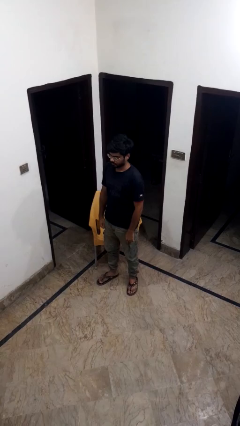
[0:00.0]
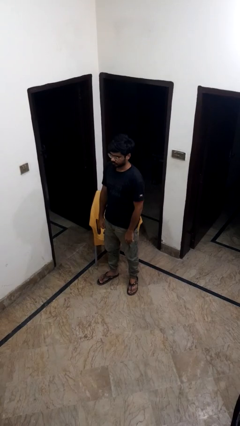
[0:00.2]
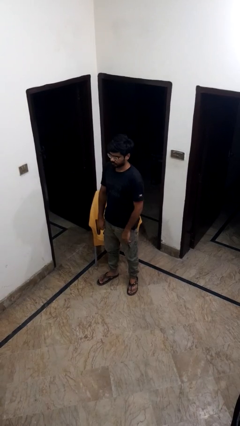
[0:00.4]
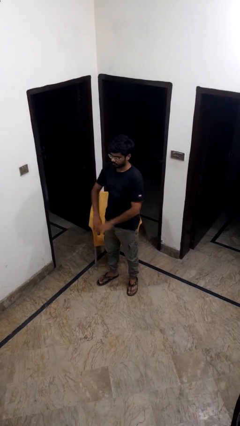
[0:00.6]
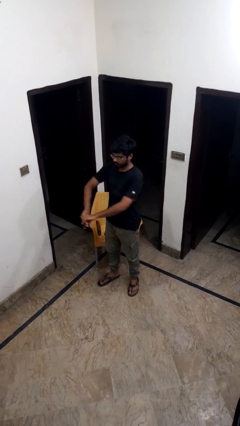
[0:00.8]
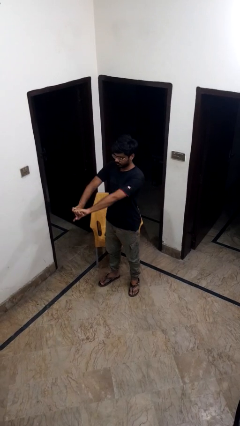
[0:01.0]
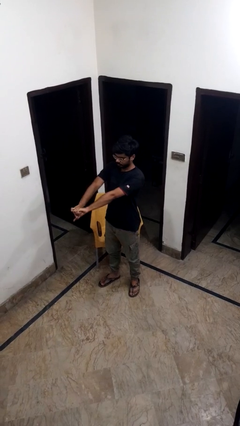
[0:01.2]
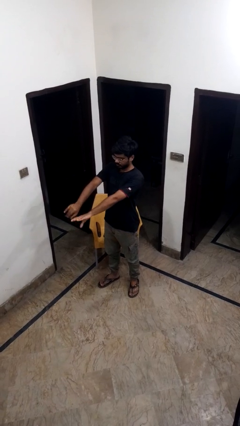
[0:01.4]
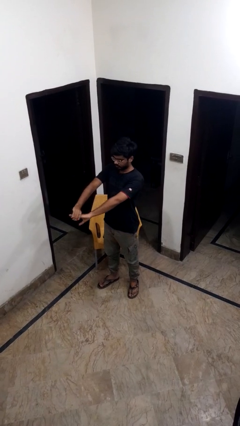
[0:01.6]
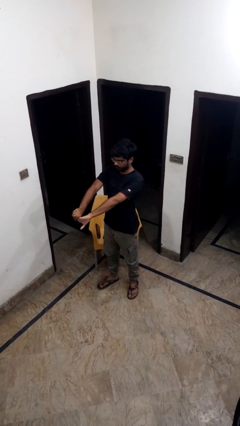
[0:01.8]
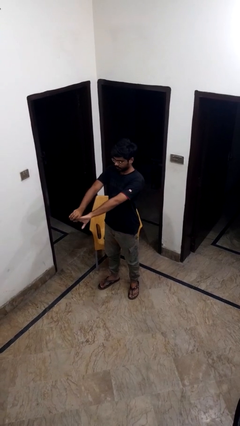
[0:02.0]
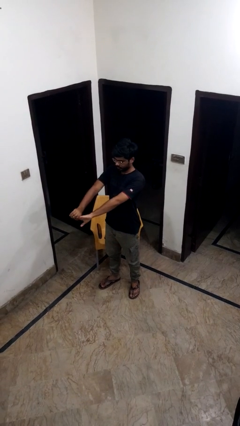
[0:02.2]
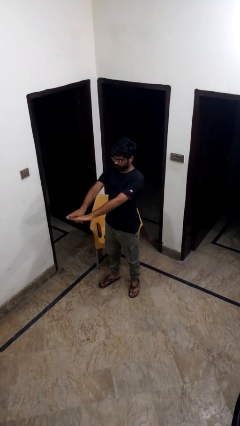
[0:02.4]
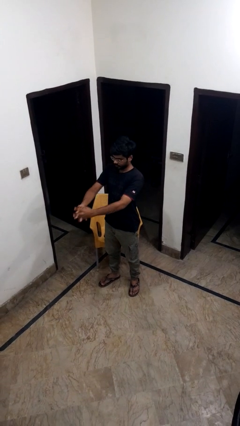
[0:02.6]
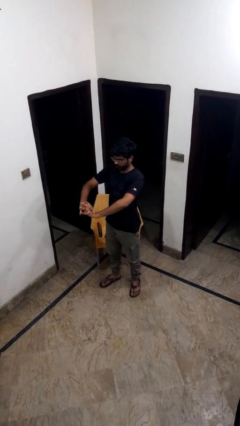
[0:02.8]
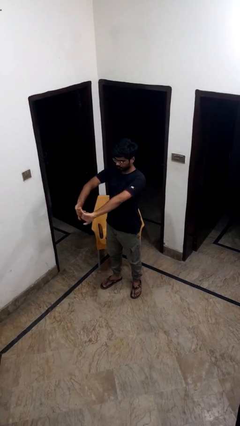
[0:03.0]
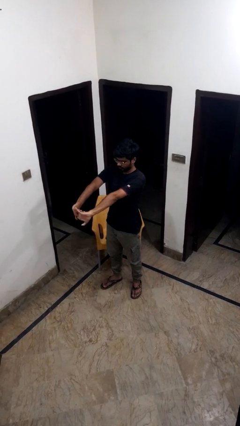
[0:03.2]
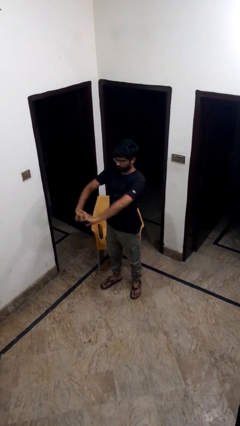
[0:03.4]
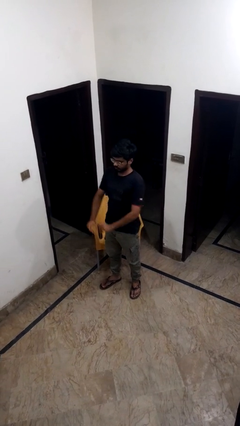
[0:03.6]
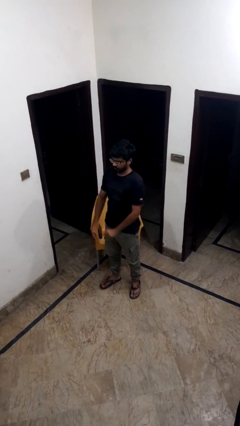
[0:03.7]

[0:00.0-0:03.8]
person cracks knuckles

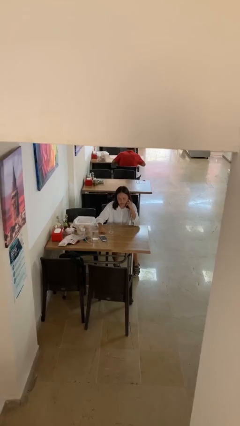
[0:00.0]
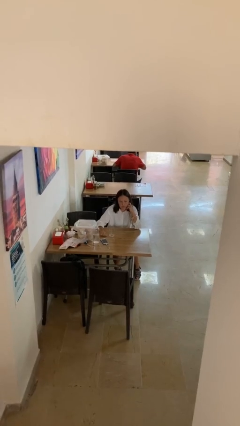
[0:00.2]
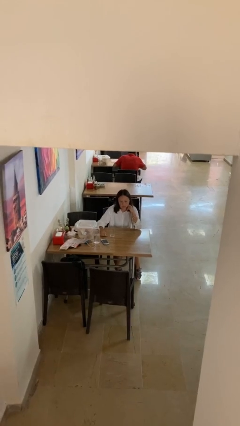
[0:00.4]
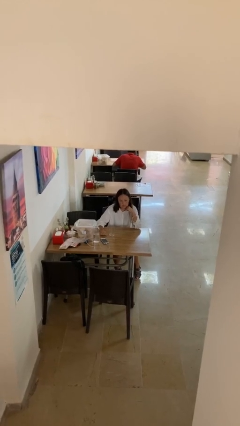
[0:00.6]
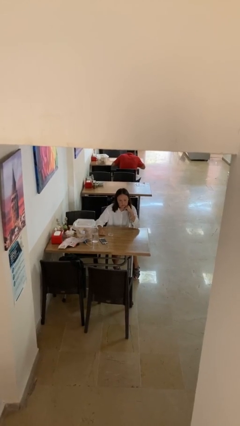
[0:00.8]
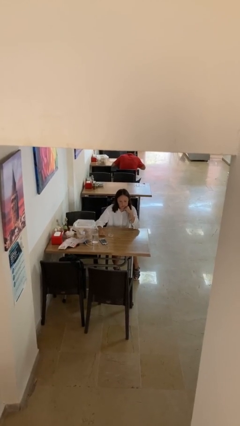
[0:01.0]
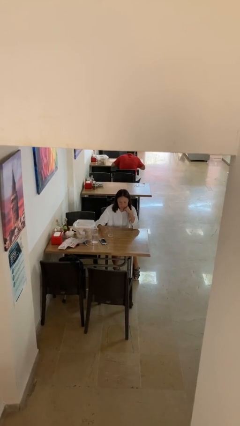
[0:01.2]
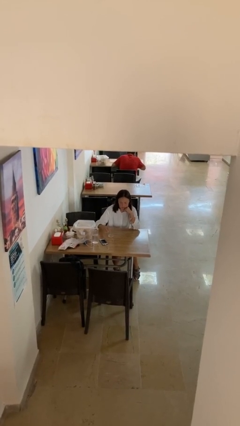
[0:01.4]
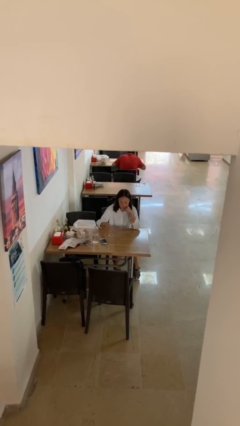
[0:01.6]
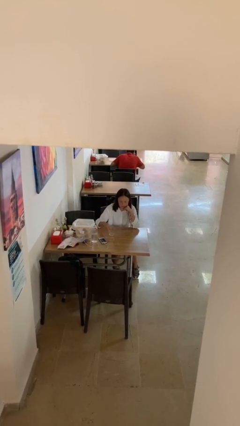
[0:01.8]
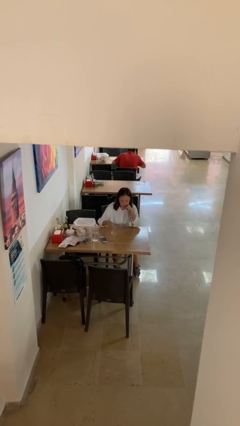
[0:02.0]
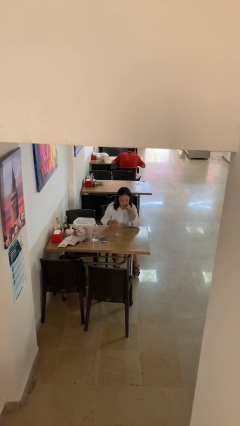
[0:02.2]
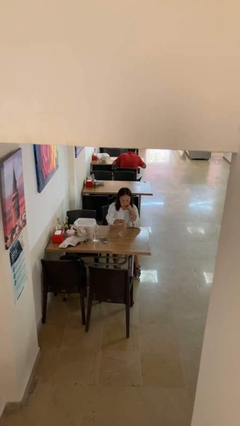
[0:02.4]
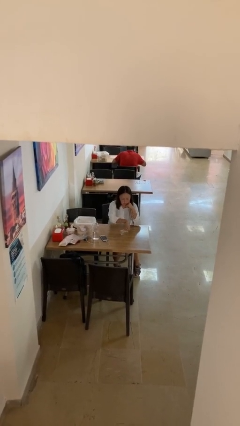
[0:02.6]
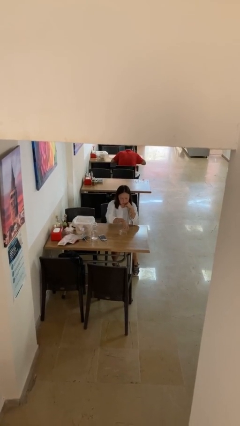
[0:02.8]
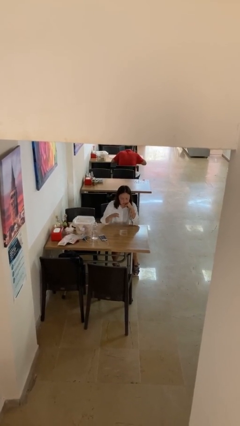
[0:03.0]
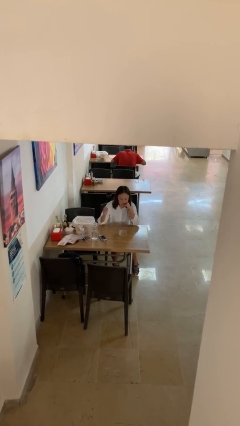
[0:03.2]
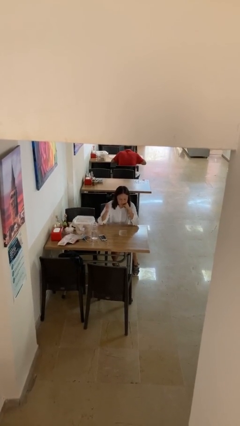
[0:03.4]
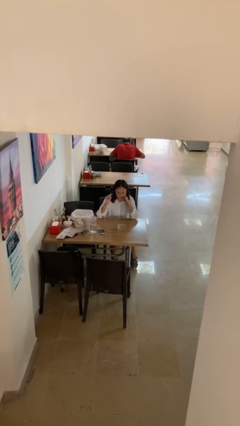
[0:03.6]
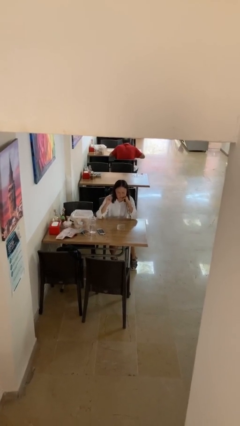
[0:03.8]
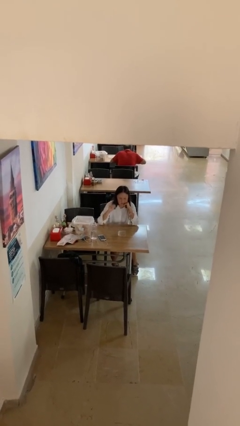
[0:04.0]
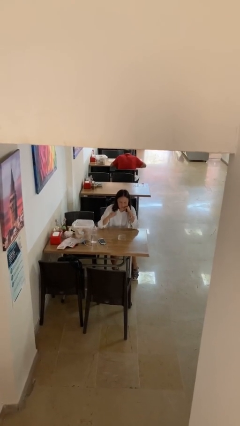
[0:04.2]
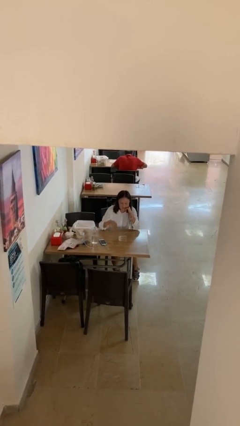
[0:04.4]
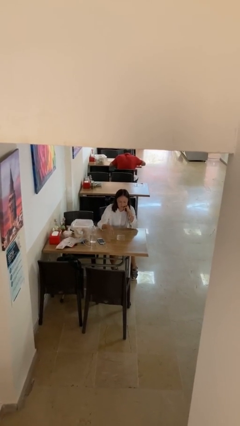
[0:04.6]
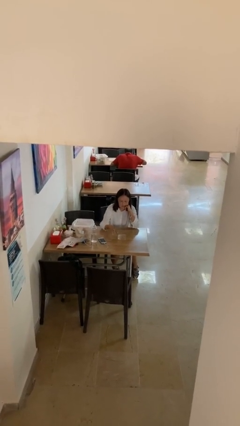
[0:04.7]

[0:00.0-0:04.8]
person knocks over glass

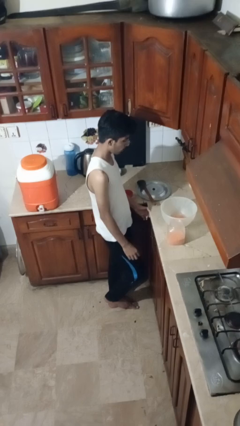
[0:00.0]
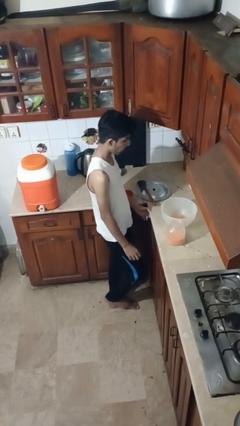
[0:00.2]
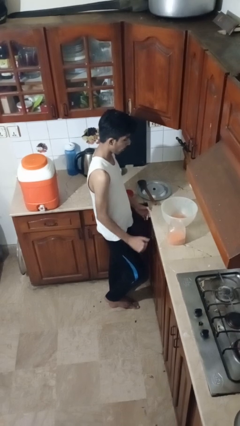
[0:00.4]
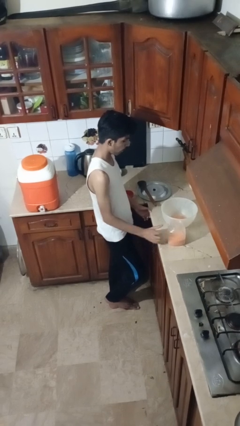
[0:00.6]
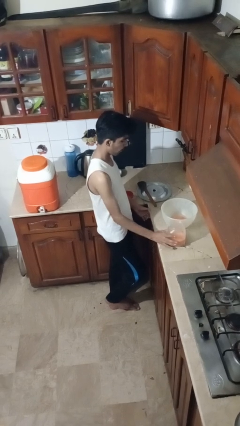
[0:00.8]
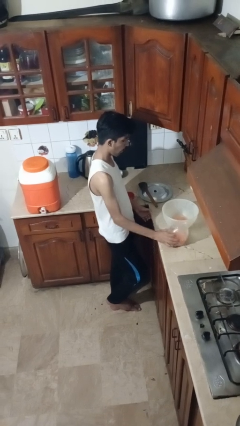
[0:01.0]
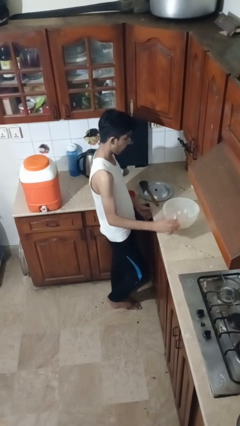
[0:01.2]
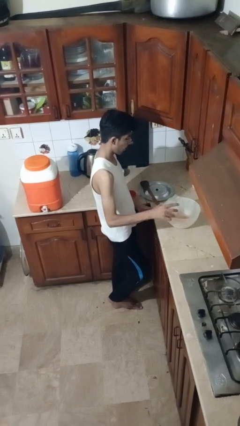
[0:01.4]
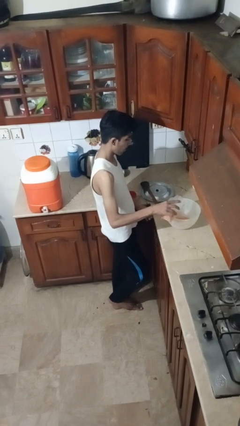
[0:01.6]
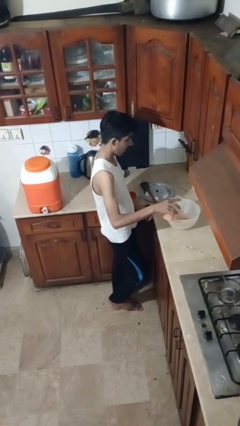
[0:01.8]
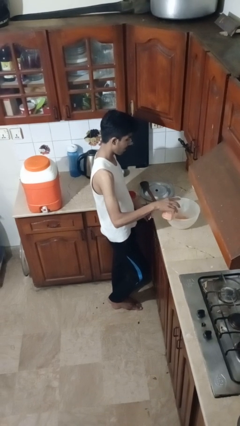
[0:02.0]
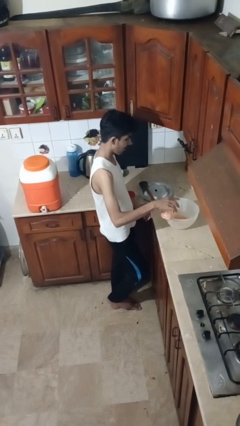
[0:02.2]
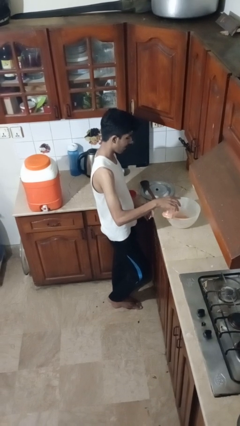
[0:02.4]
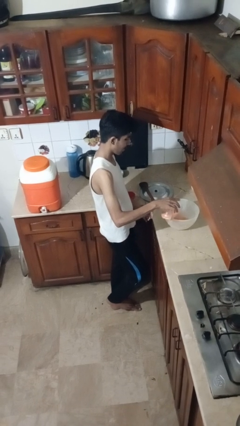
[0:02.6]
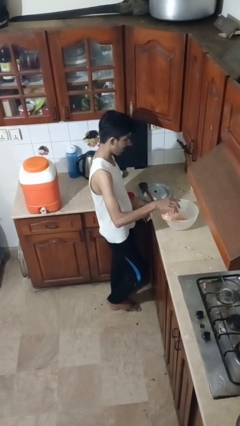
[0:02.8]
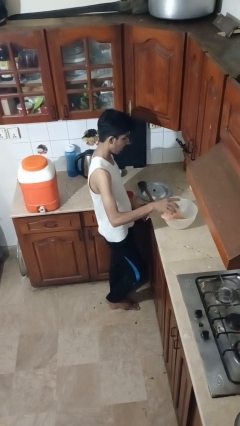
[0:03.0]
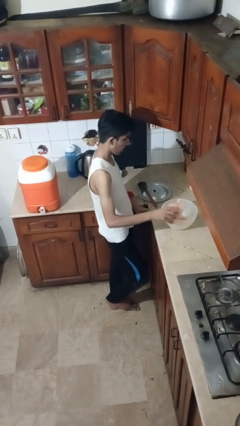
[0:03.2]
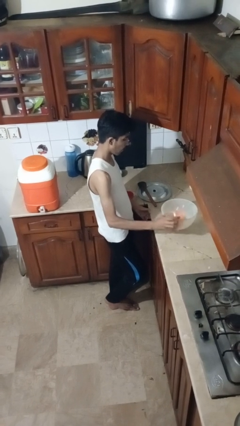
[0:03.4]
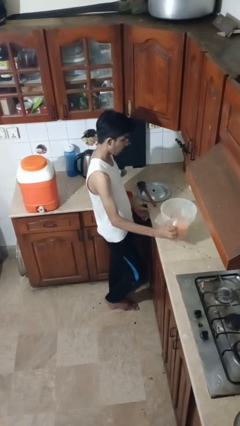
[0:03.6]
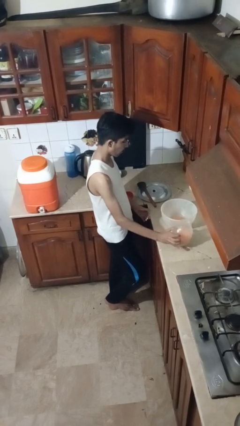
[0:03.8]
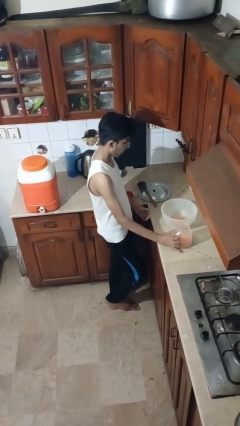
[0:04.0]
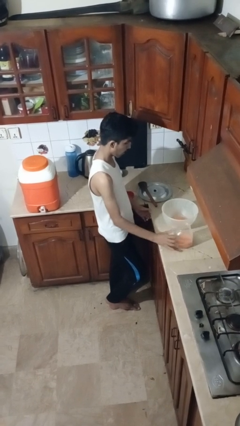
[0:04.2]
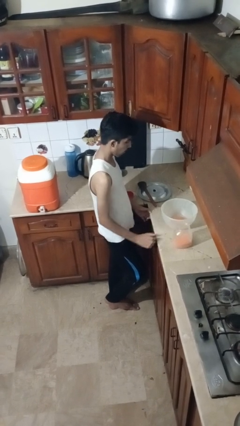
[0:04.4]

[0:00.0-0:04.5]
person pours into bowl

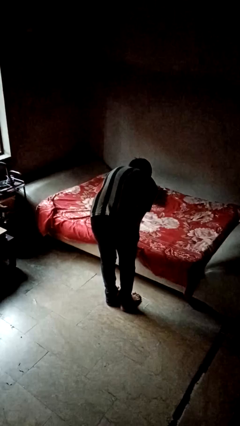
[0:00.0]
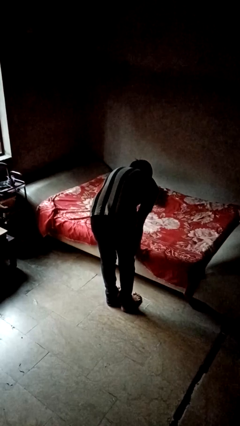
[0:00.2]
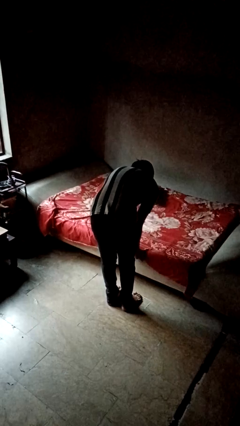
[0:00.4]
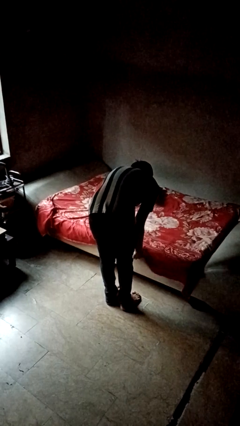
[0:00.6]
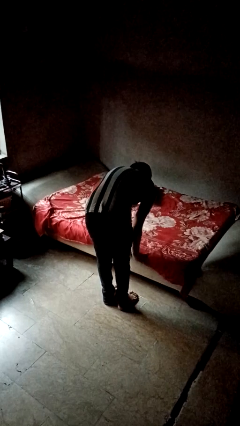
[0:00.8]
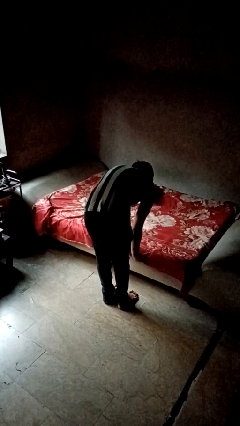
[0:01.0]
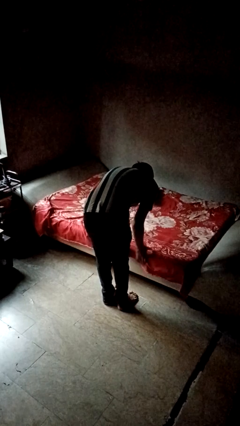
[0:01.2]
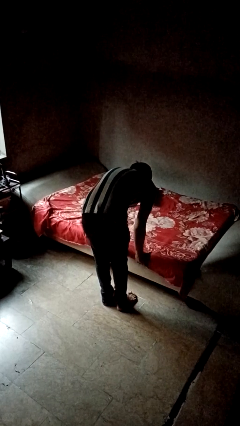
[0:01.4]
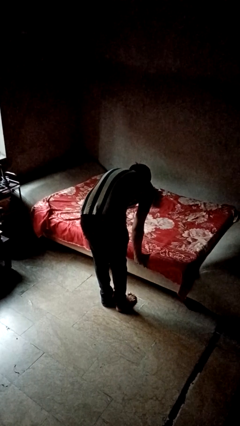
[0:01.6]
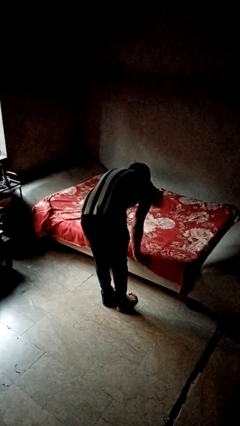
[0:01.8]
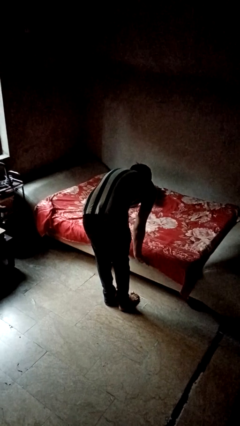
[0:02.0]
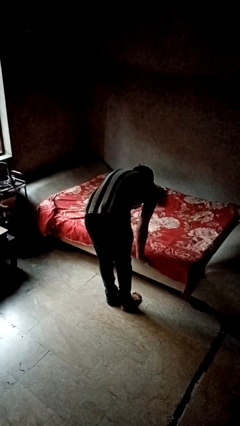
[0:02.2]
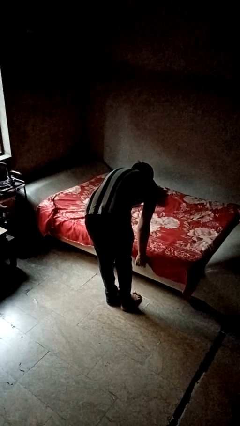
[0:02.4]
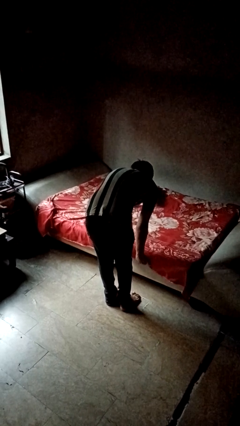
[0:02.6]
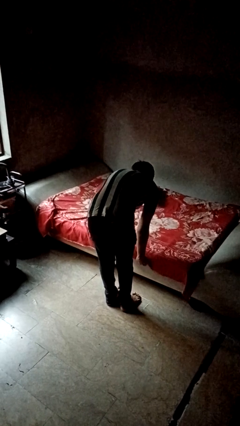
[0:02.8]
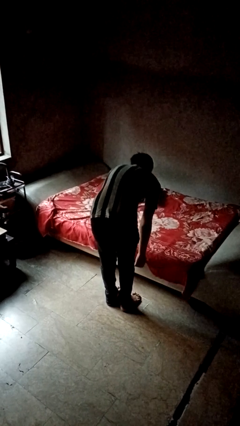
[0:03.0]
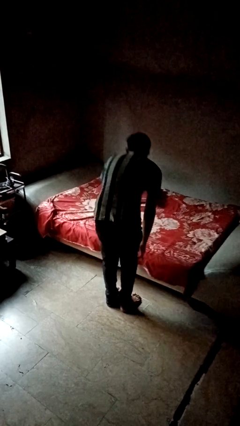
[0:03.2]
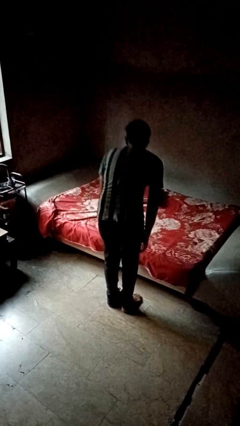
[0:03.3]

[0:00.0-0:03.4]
person makes bed

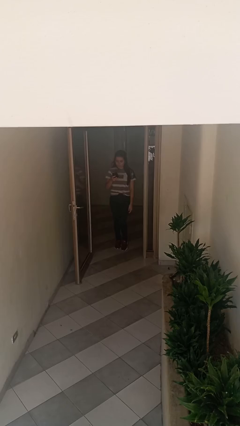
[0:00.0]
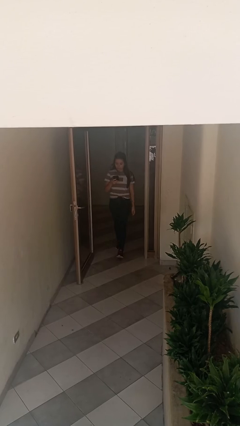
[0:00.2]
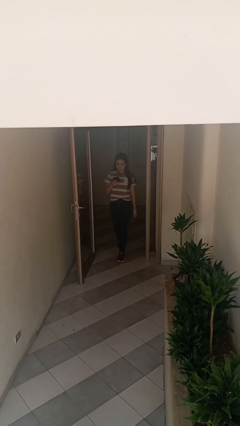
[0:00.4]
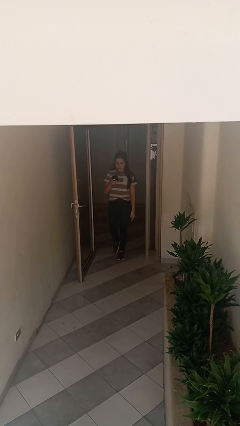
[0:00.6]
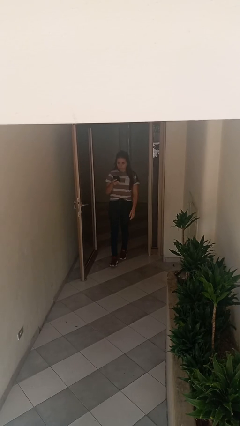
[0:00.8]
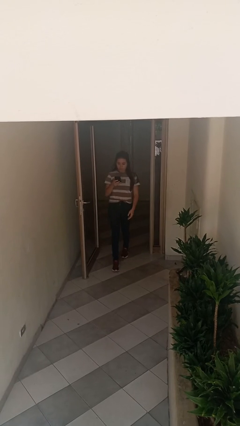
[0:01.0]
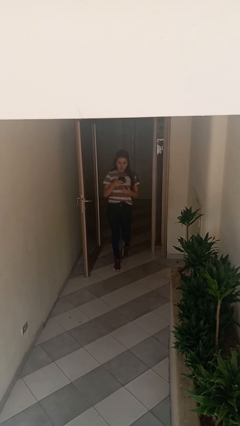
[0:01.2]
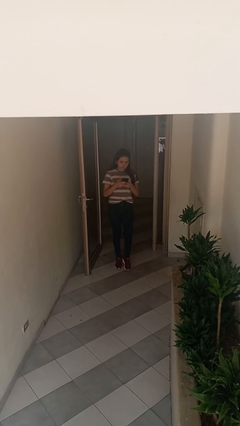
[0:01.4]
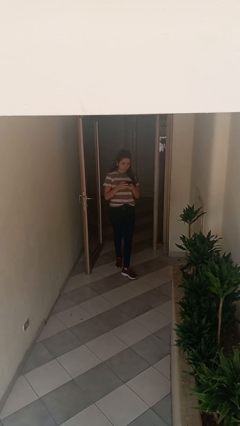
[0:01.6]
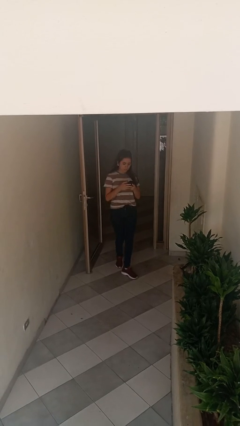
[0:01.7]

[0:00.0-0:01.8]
person enters scene through structure
